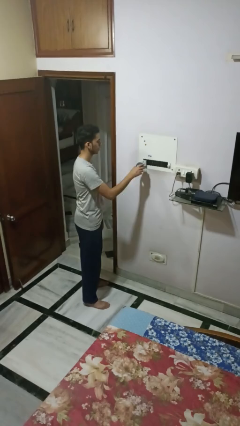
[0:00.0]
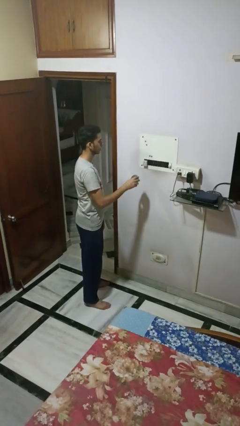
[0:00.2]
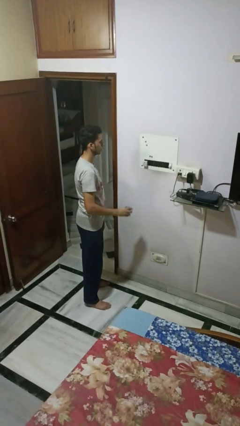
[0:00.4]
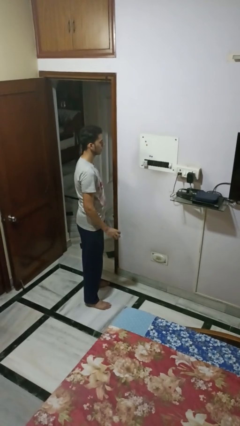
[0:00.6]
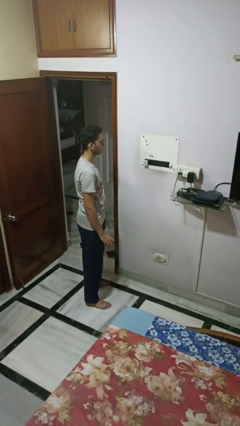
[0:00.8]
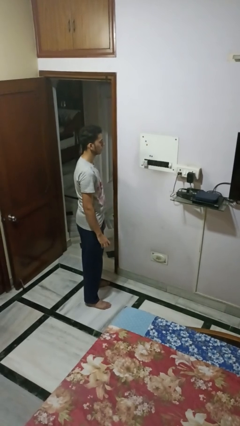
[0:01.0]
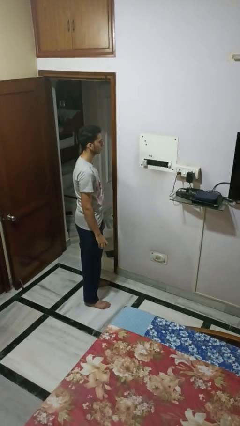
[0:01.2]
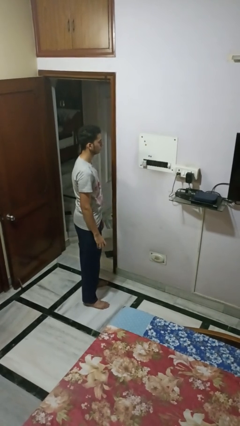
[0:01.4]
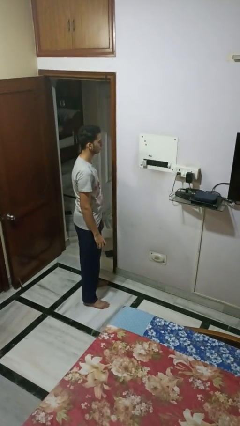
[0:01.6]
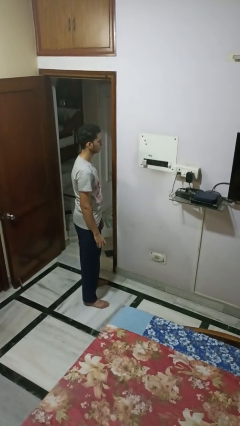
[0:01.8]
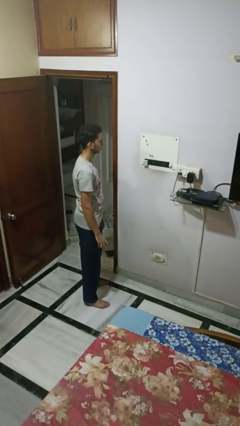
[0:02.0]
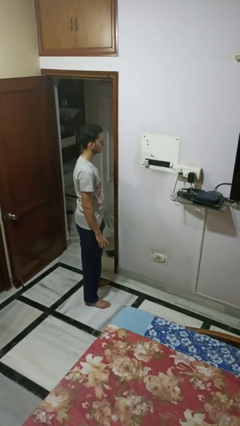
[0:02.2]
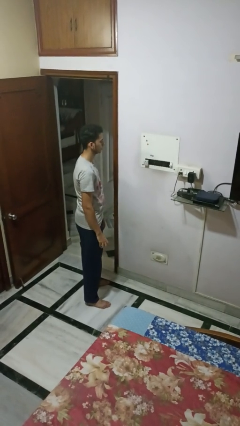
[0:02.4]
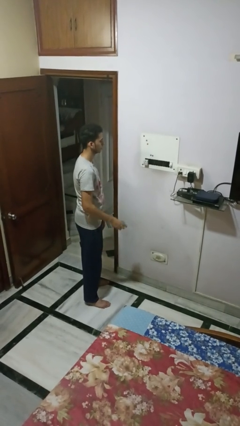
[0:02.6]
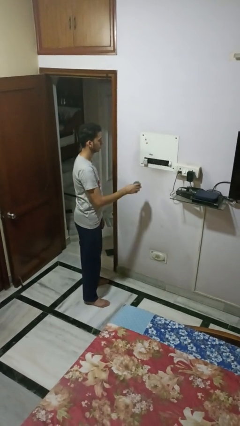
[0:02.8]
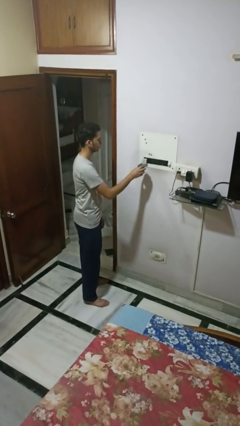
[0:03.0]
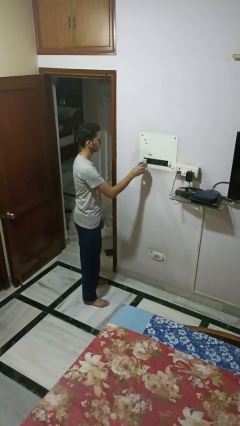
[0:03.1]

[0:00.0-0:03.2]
person unplugs from electrical socket

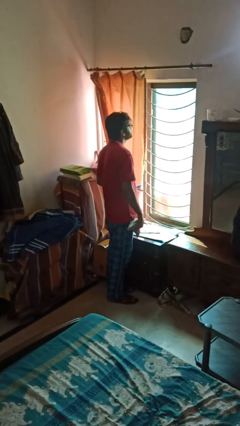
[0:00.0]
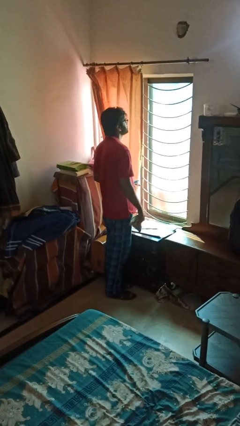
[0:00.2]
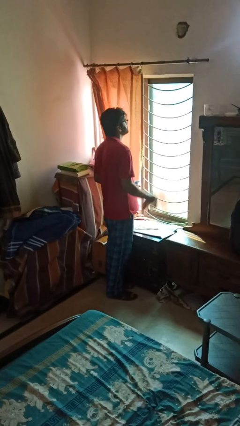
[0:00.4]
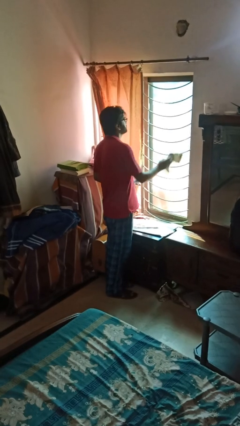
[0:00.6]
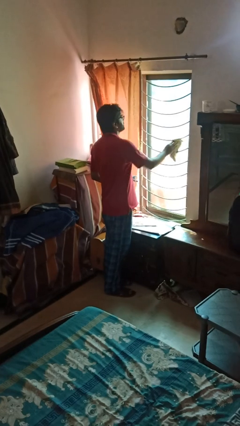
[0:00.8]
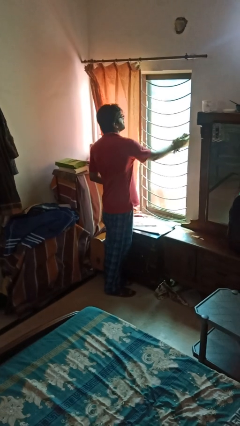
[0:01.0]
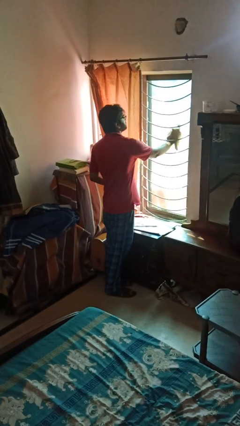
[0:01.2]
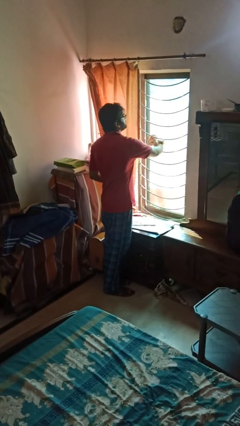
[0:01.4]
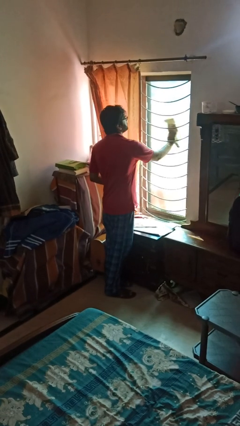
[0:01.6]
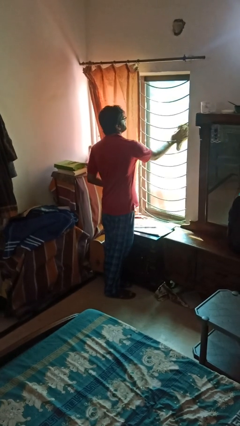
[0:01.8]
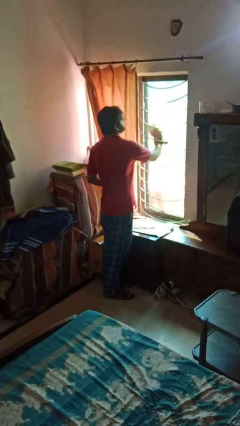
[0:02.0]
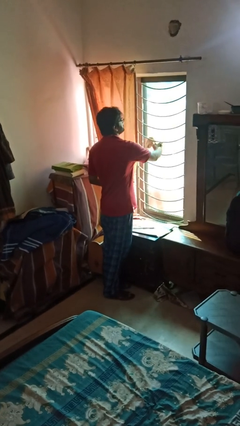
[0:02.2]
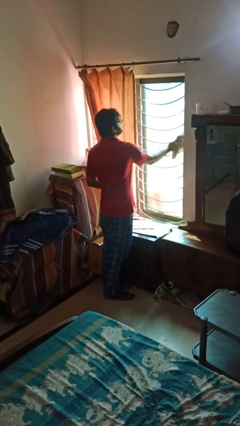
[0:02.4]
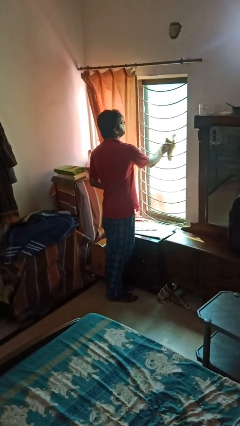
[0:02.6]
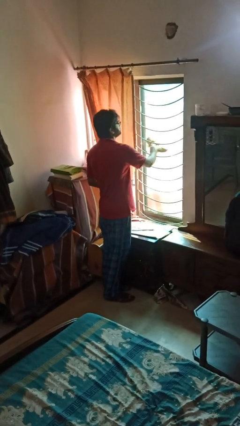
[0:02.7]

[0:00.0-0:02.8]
person washes window

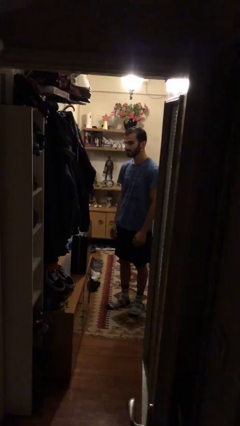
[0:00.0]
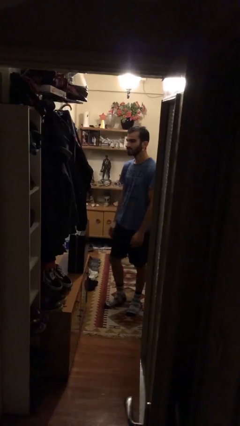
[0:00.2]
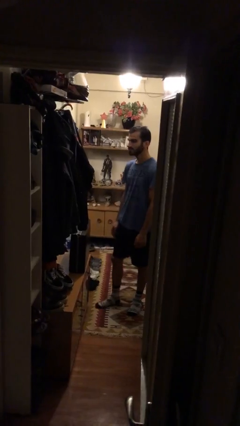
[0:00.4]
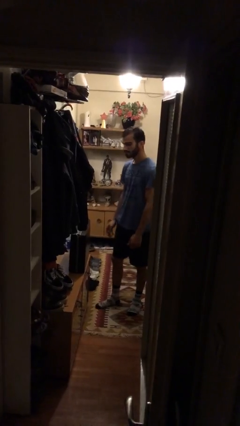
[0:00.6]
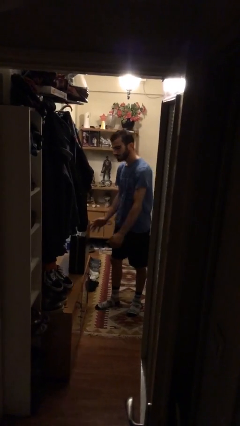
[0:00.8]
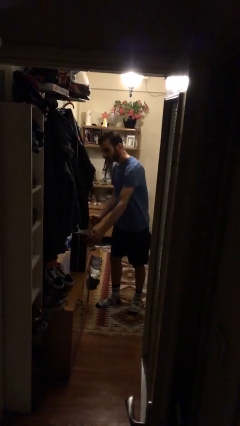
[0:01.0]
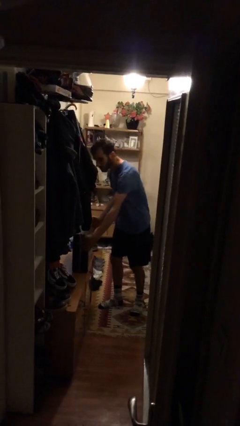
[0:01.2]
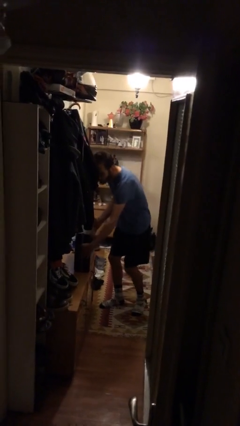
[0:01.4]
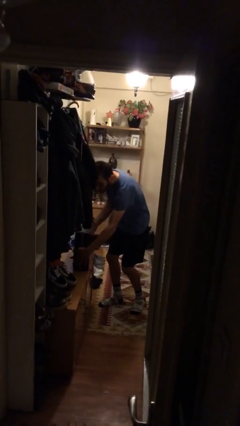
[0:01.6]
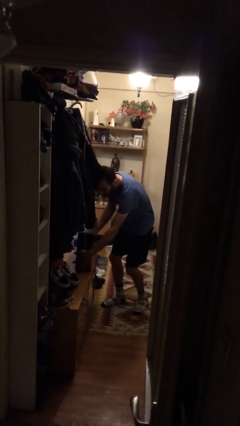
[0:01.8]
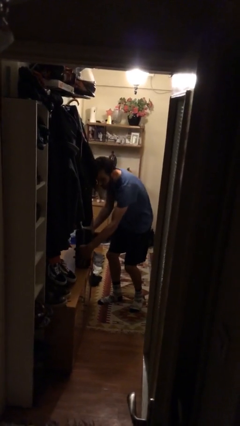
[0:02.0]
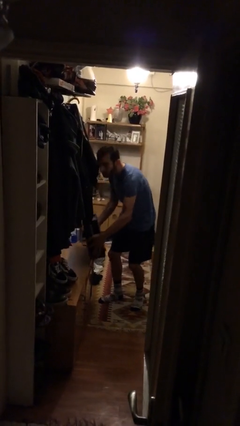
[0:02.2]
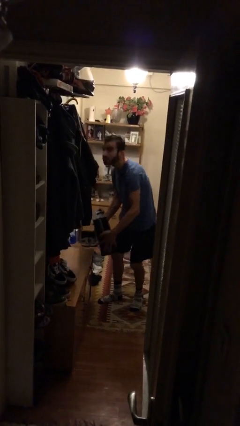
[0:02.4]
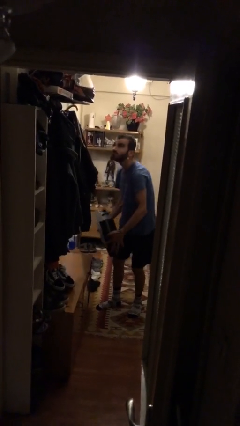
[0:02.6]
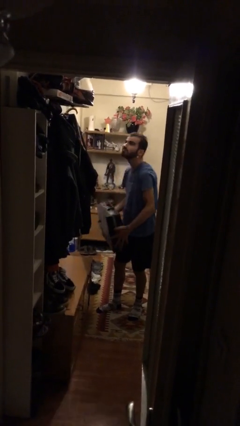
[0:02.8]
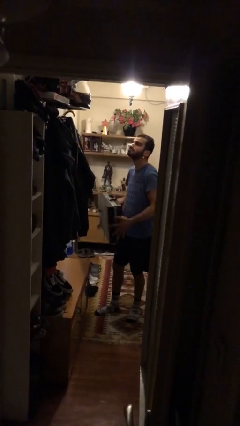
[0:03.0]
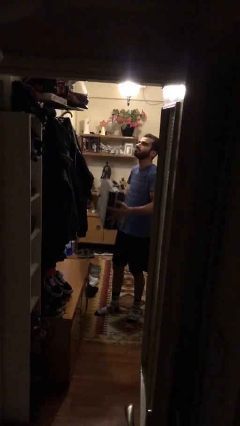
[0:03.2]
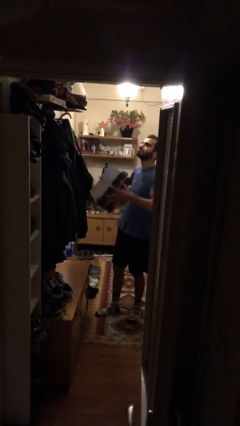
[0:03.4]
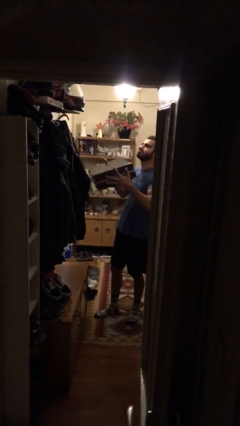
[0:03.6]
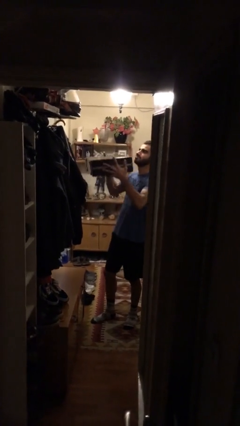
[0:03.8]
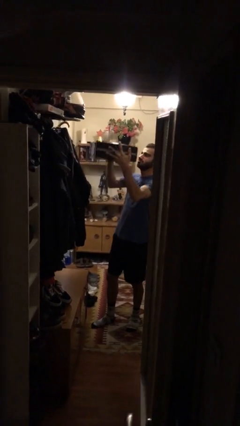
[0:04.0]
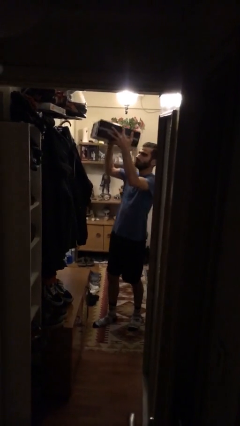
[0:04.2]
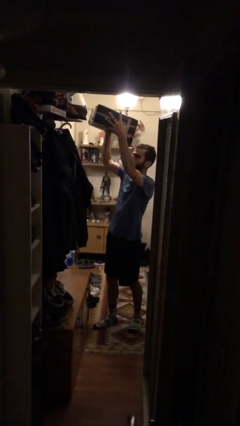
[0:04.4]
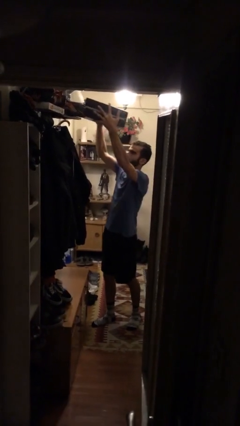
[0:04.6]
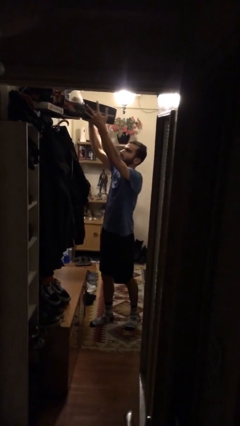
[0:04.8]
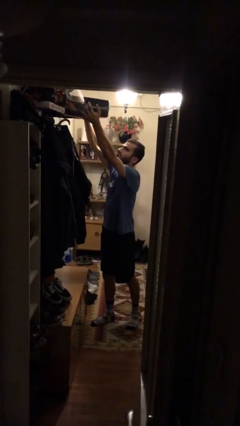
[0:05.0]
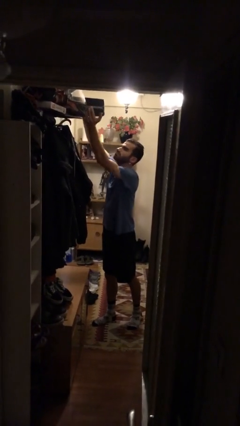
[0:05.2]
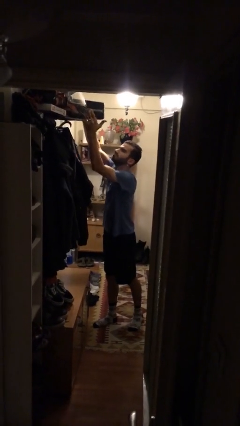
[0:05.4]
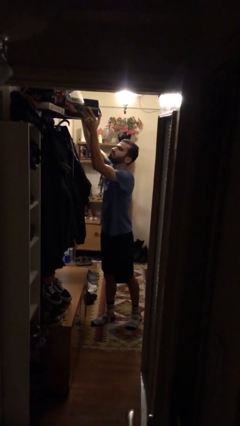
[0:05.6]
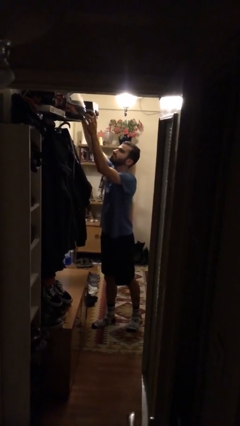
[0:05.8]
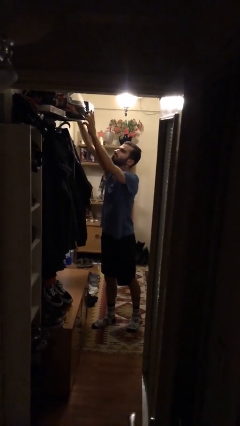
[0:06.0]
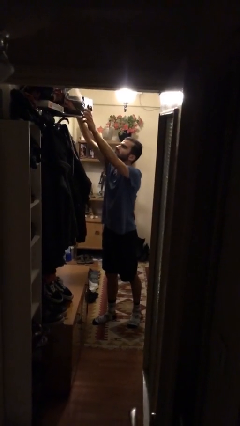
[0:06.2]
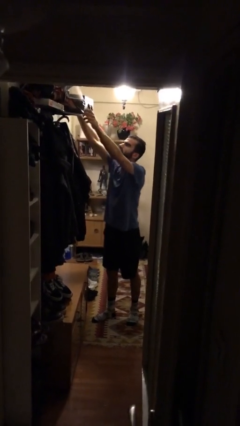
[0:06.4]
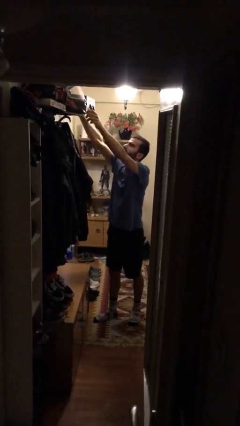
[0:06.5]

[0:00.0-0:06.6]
person picks up object from table

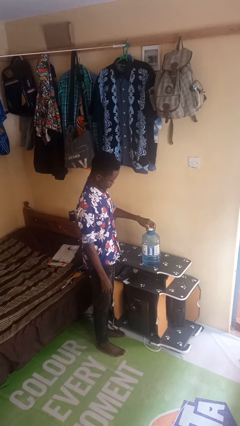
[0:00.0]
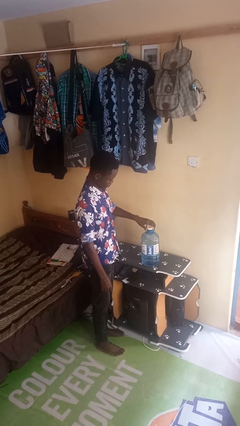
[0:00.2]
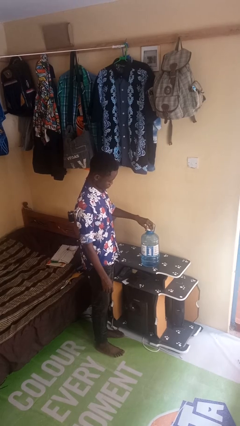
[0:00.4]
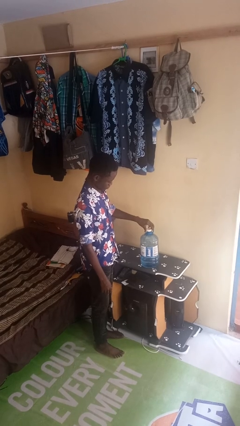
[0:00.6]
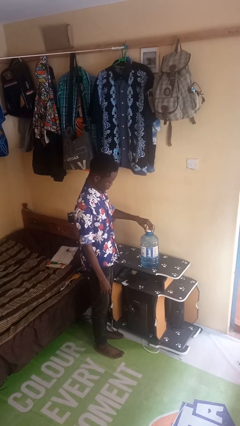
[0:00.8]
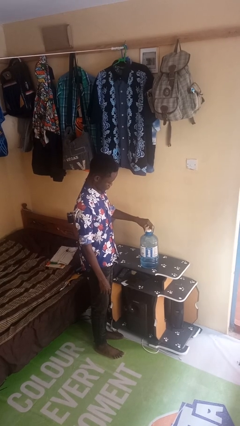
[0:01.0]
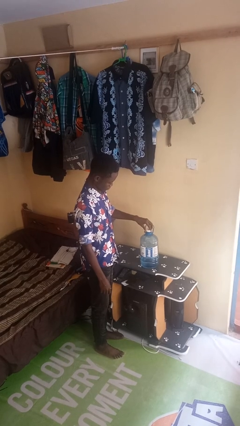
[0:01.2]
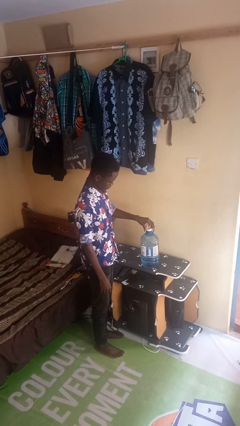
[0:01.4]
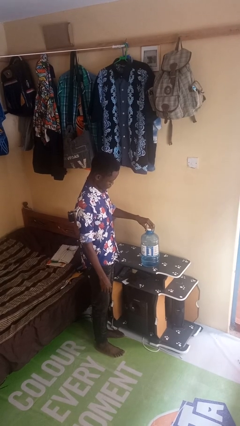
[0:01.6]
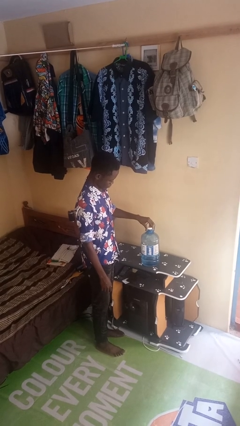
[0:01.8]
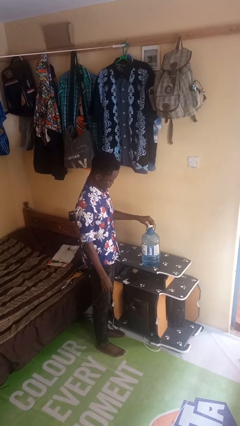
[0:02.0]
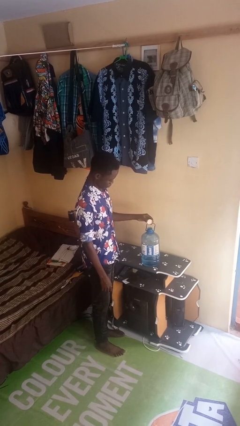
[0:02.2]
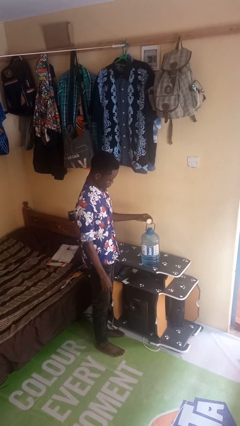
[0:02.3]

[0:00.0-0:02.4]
person unscrews lid from bottle

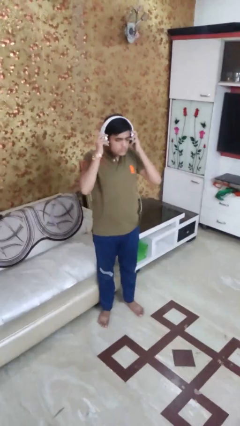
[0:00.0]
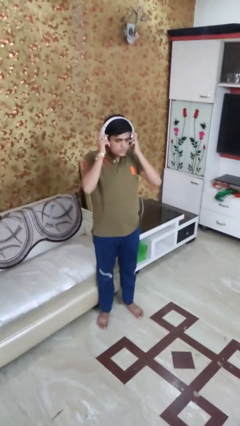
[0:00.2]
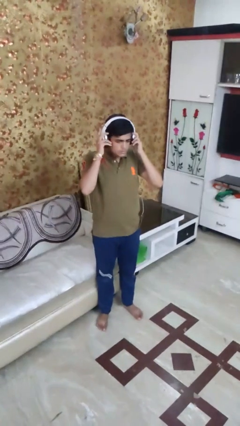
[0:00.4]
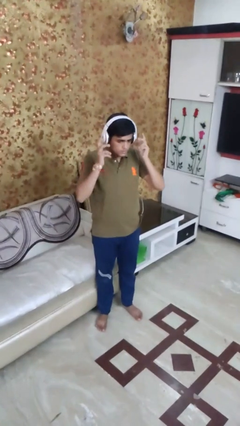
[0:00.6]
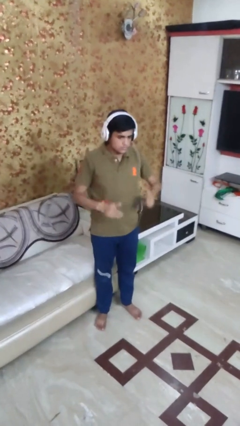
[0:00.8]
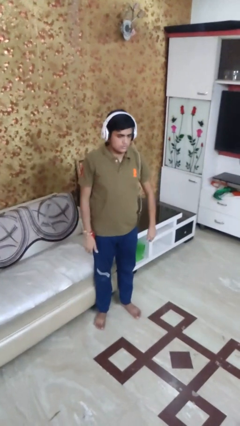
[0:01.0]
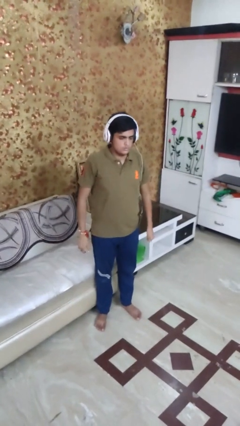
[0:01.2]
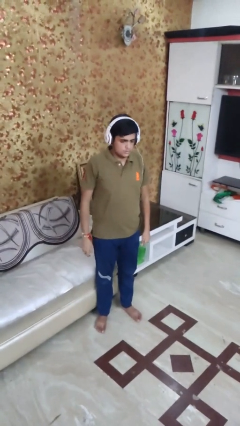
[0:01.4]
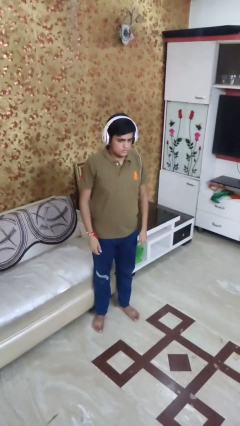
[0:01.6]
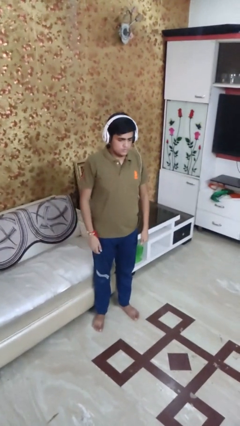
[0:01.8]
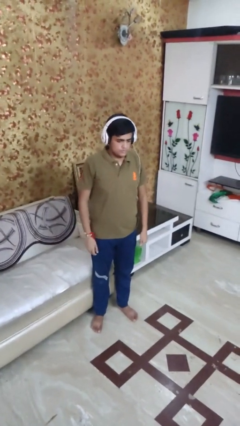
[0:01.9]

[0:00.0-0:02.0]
person puts on headphones

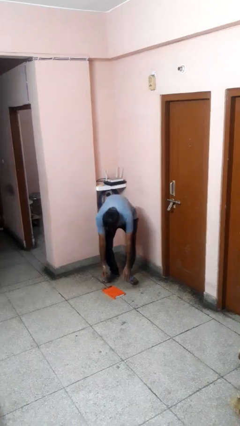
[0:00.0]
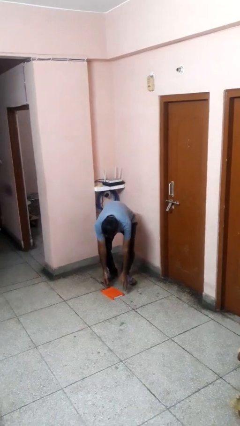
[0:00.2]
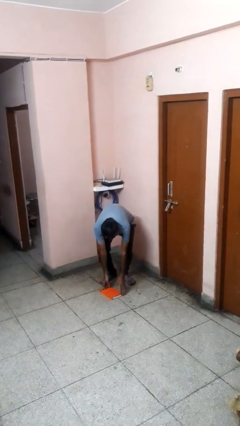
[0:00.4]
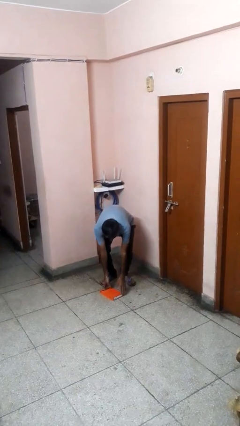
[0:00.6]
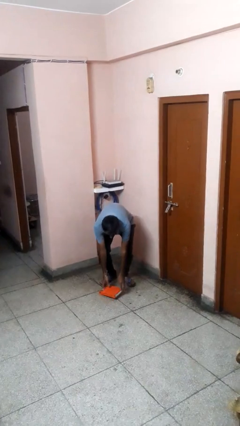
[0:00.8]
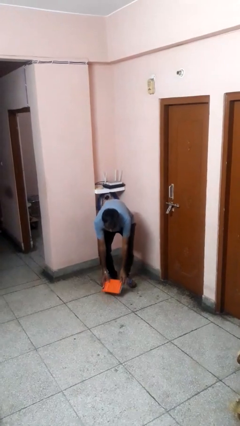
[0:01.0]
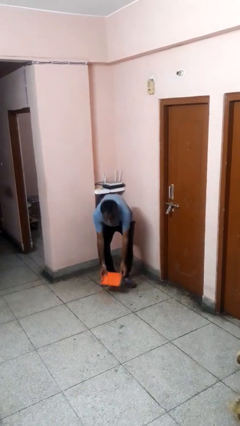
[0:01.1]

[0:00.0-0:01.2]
person picks up object from floor
